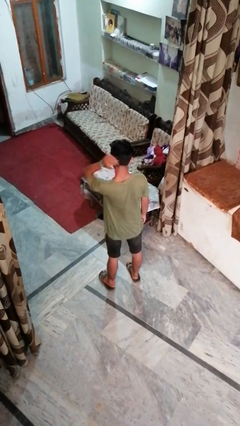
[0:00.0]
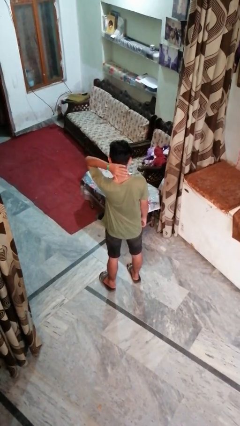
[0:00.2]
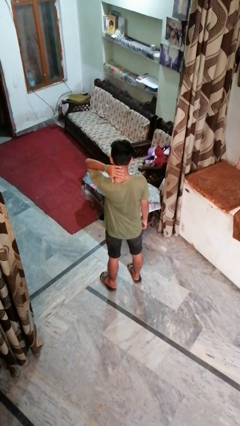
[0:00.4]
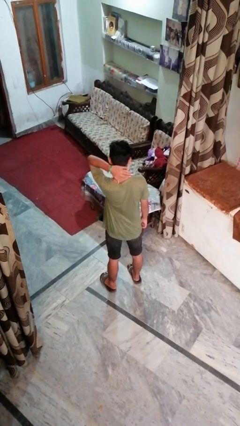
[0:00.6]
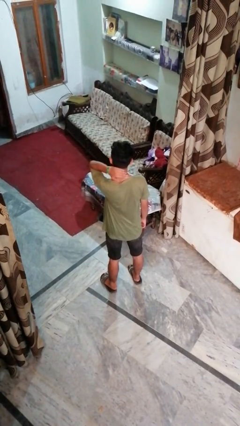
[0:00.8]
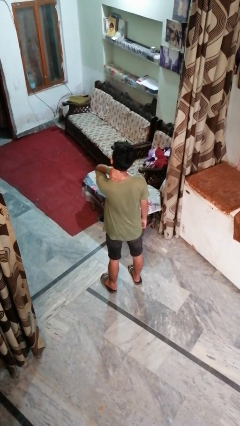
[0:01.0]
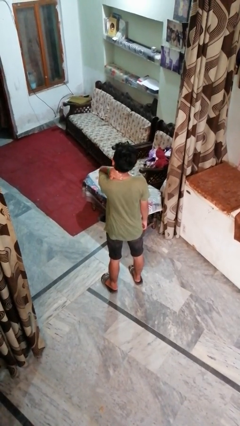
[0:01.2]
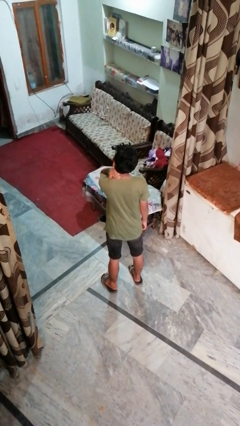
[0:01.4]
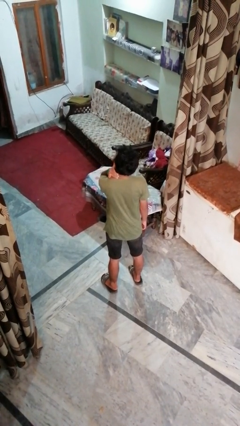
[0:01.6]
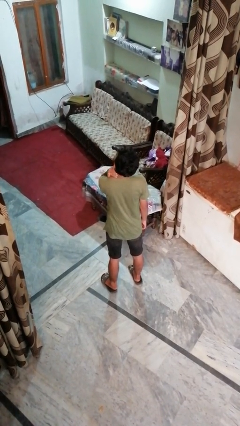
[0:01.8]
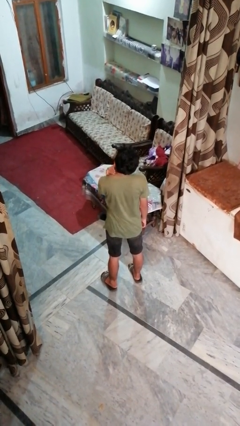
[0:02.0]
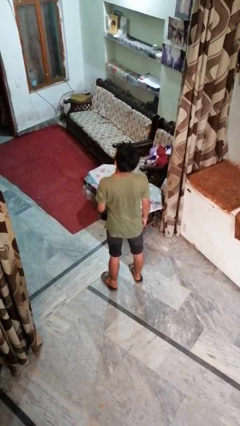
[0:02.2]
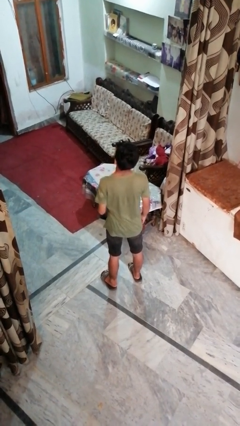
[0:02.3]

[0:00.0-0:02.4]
person rubs neck

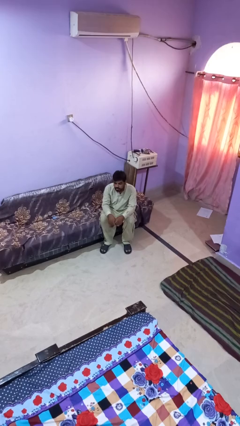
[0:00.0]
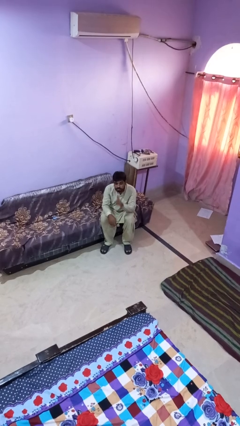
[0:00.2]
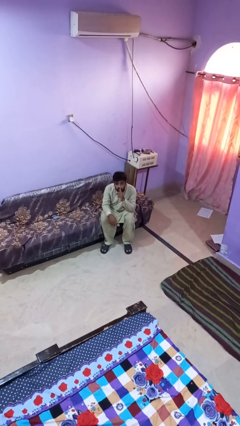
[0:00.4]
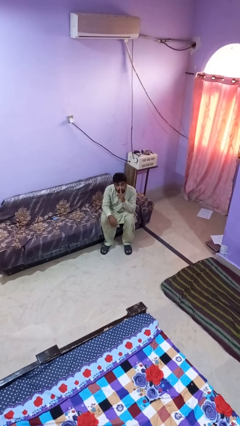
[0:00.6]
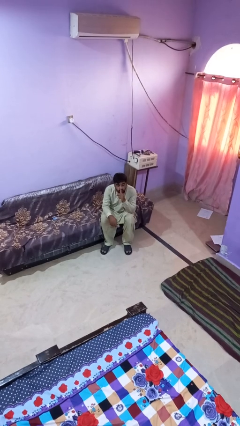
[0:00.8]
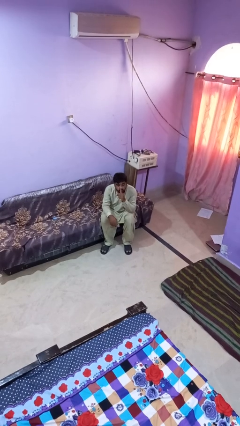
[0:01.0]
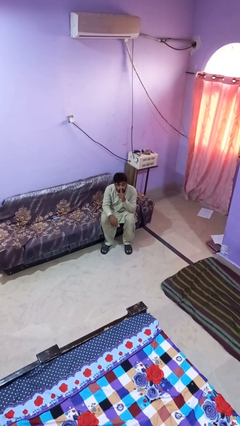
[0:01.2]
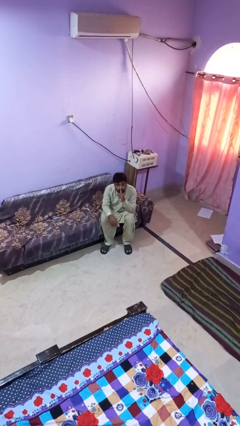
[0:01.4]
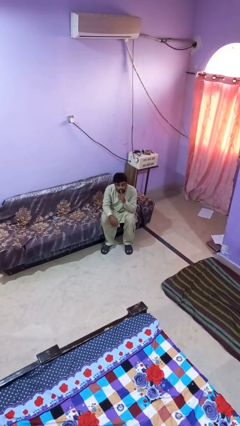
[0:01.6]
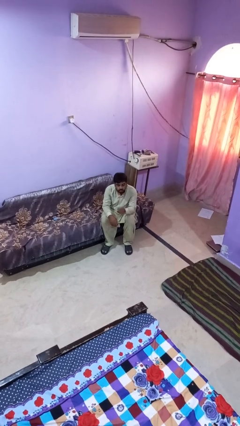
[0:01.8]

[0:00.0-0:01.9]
person gestures be quiet

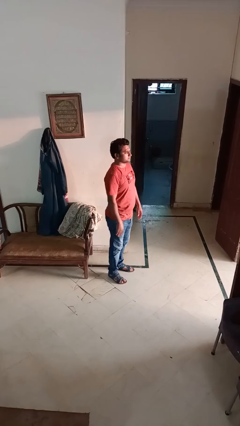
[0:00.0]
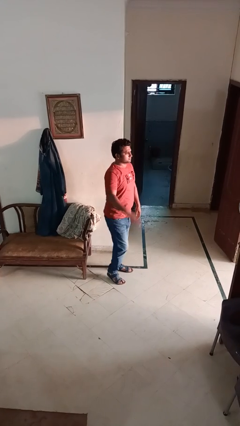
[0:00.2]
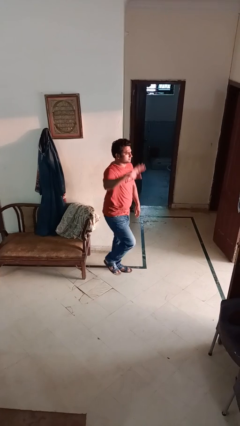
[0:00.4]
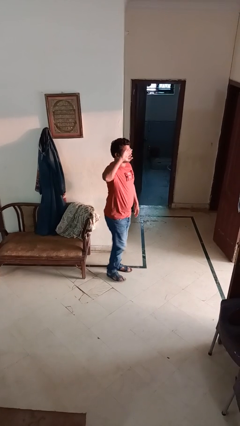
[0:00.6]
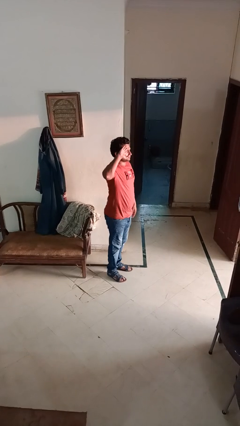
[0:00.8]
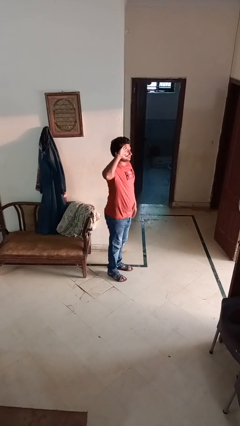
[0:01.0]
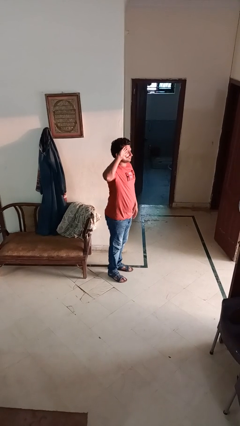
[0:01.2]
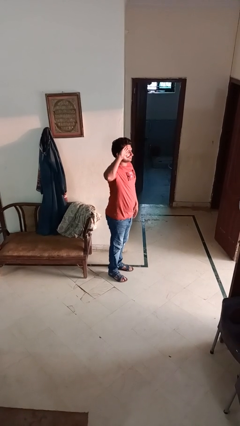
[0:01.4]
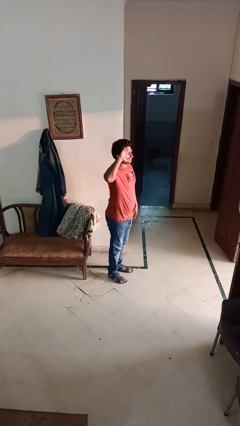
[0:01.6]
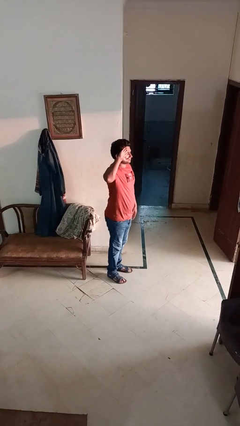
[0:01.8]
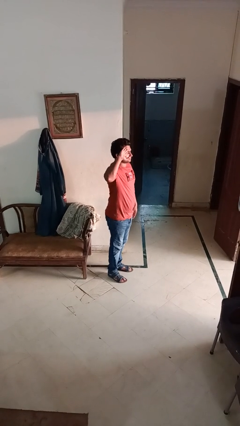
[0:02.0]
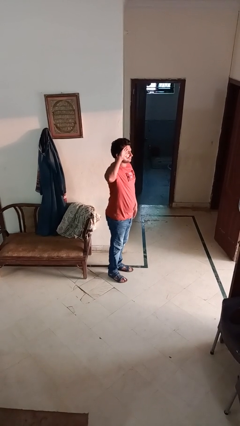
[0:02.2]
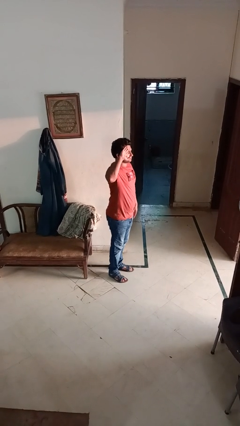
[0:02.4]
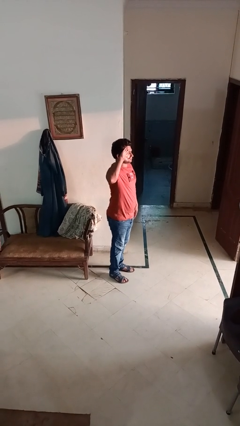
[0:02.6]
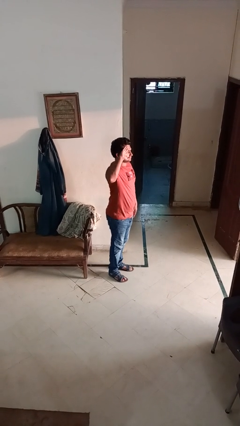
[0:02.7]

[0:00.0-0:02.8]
person salutes

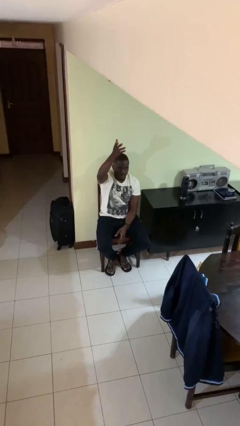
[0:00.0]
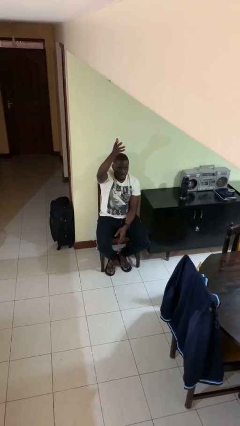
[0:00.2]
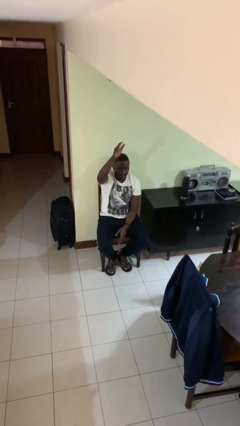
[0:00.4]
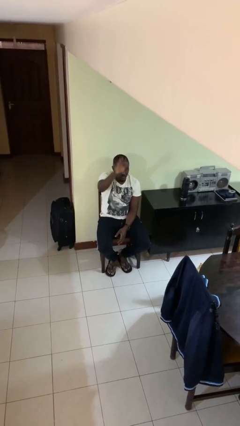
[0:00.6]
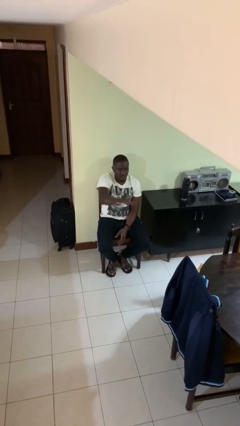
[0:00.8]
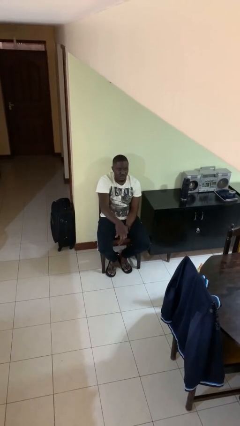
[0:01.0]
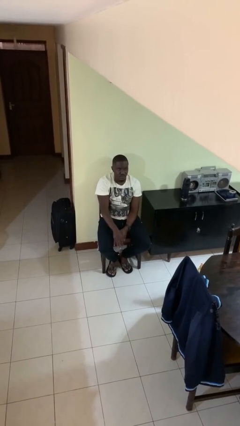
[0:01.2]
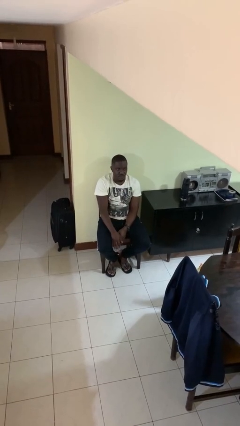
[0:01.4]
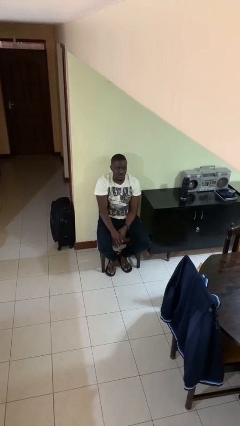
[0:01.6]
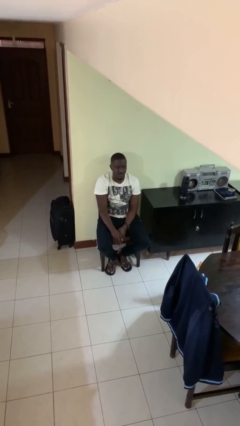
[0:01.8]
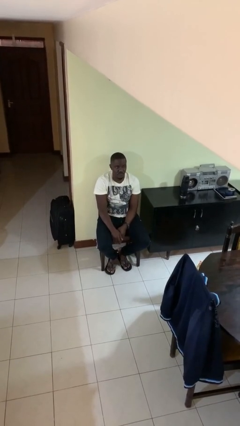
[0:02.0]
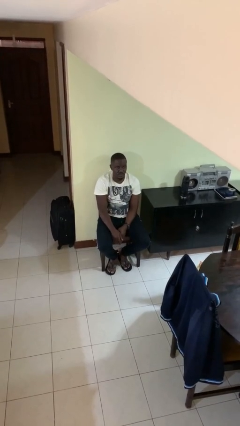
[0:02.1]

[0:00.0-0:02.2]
person gestures swipe down

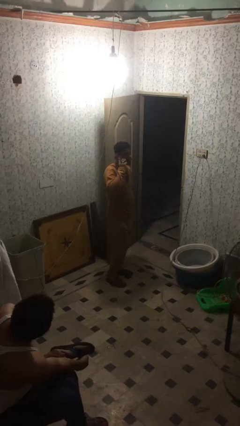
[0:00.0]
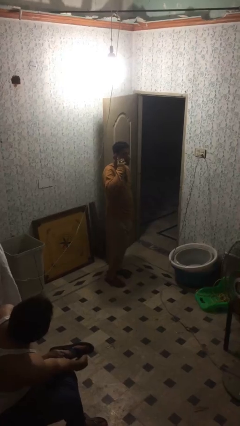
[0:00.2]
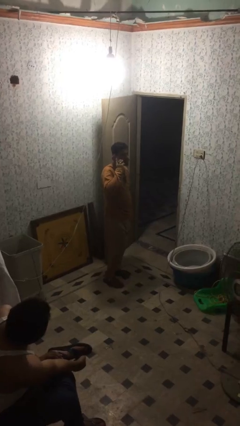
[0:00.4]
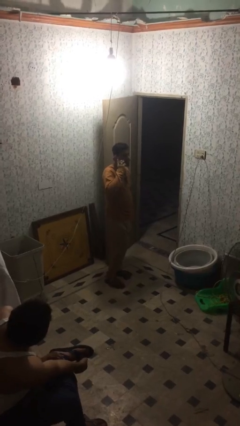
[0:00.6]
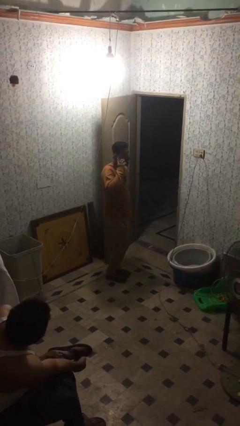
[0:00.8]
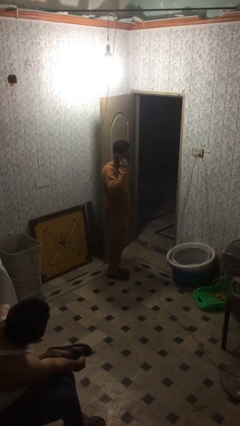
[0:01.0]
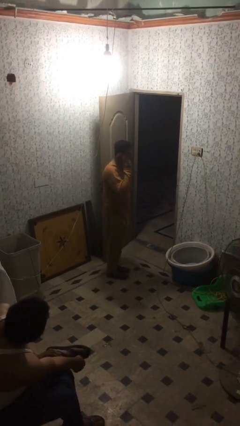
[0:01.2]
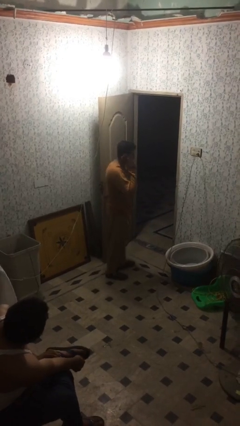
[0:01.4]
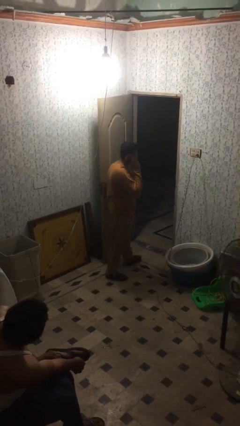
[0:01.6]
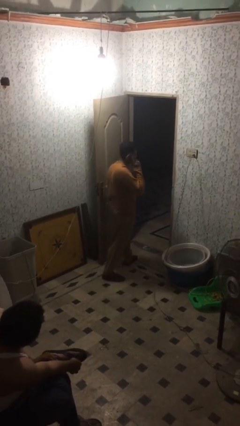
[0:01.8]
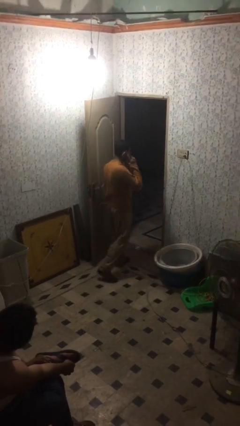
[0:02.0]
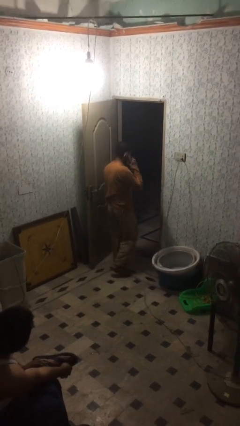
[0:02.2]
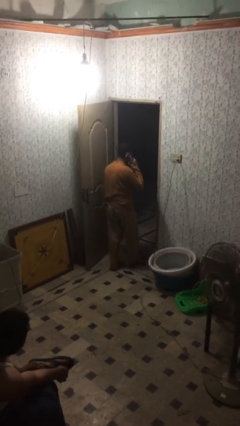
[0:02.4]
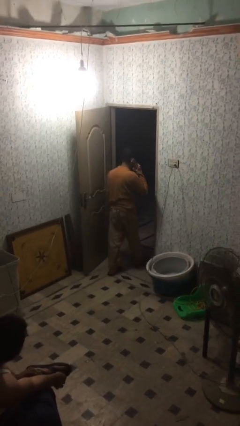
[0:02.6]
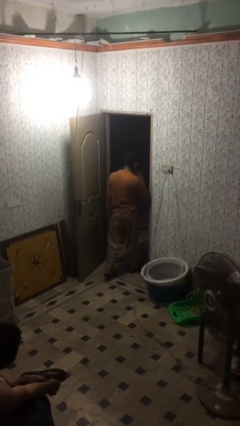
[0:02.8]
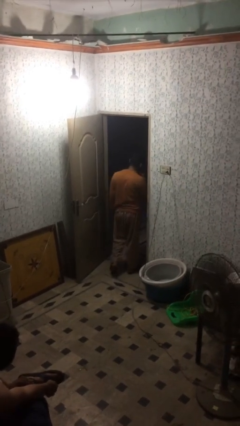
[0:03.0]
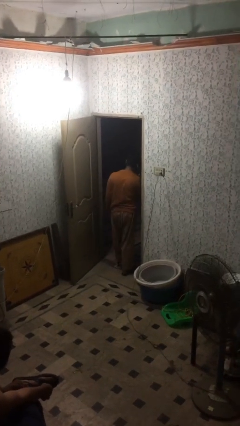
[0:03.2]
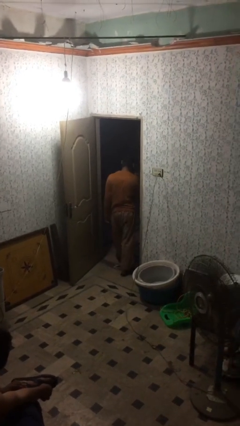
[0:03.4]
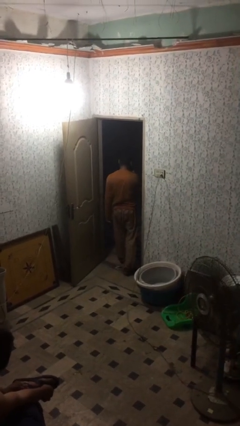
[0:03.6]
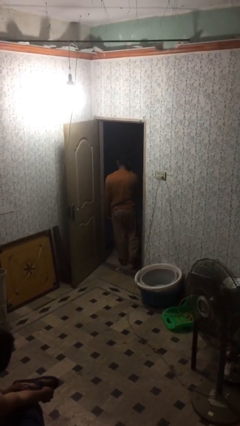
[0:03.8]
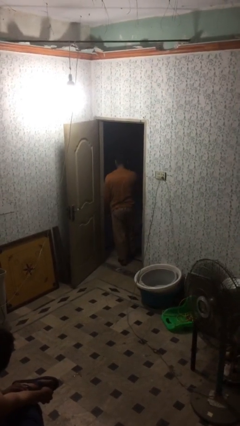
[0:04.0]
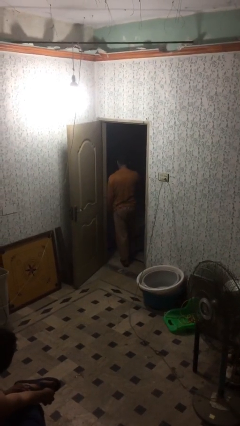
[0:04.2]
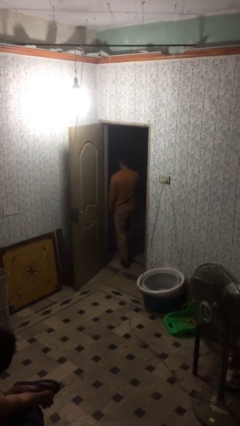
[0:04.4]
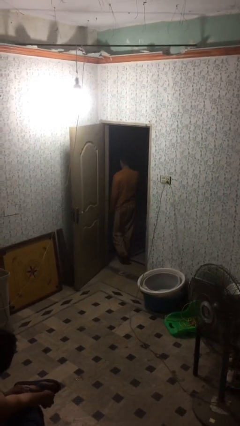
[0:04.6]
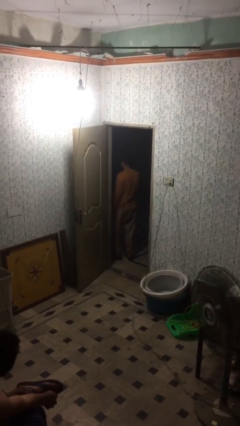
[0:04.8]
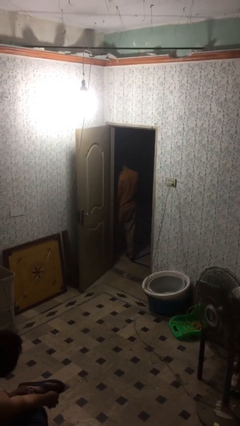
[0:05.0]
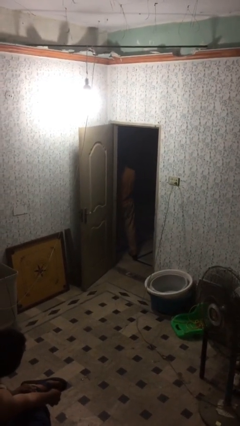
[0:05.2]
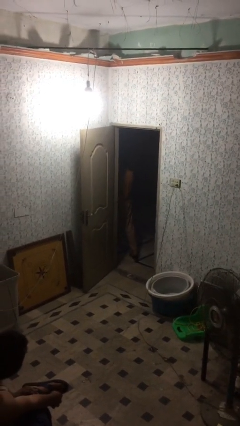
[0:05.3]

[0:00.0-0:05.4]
person exits scene through structure

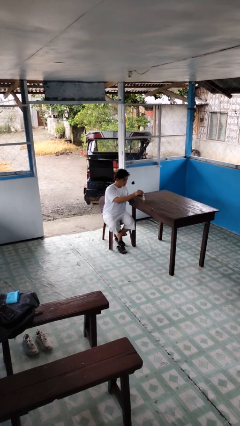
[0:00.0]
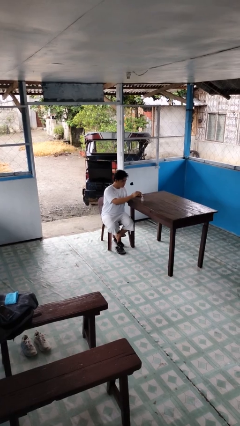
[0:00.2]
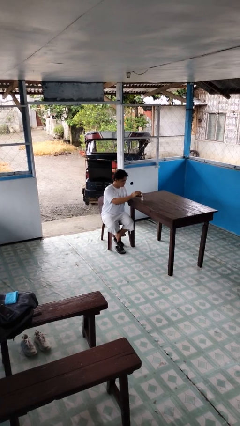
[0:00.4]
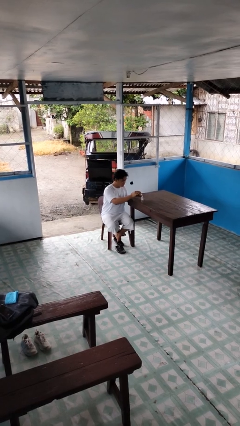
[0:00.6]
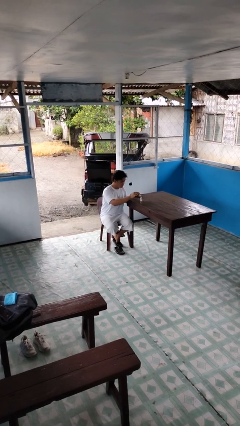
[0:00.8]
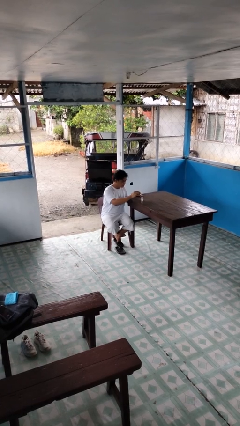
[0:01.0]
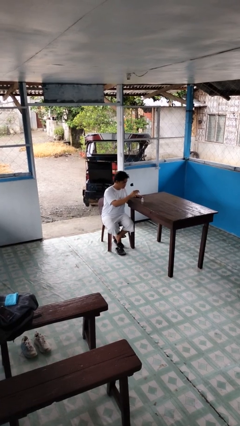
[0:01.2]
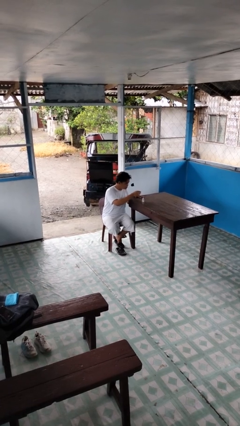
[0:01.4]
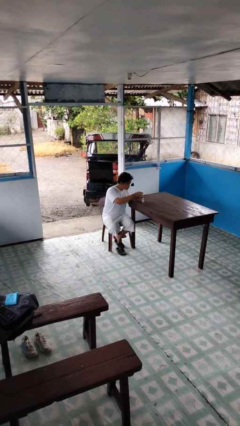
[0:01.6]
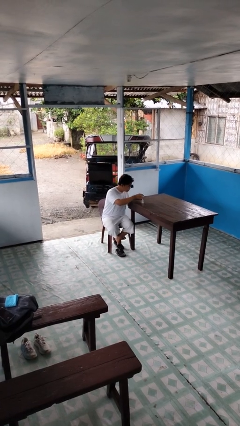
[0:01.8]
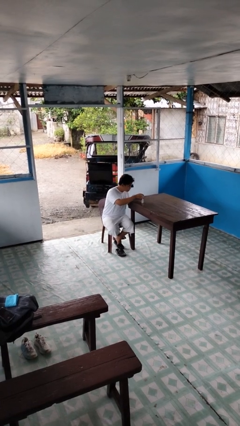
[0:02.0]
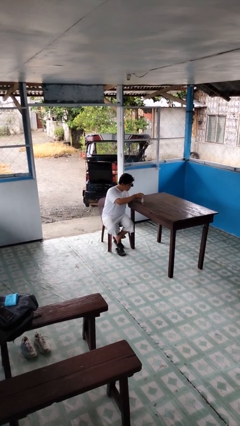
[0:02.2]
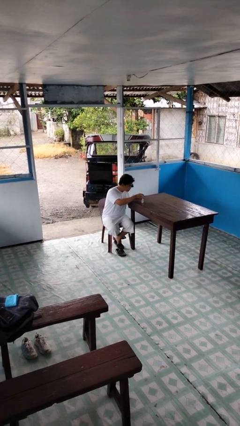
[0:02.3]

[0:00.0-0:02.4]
person paints fingernails

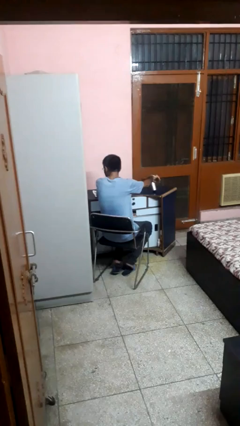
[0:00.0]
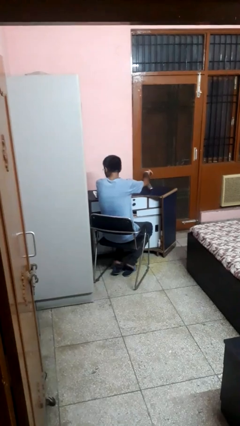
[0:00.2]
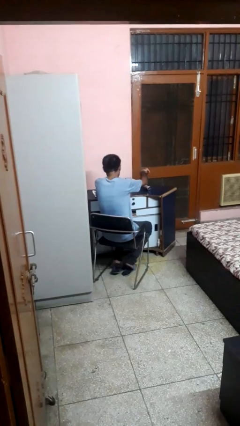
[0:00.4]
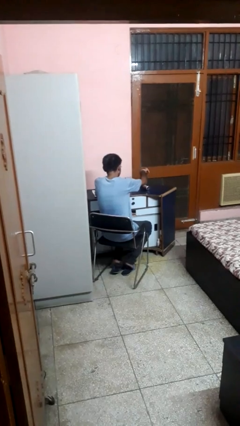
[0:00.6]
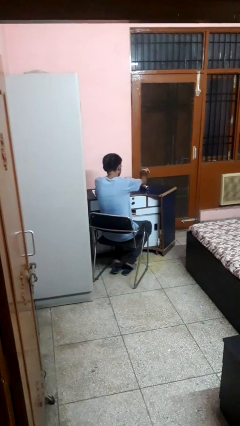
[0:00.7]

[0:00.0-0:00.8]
person knocks over glass
